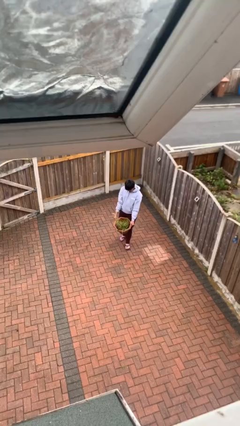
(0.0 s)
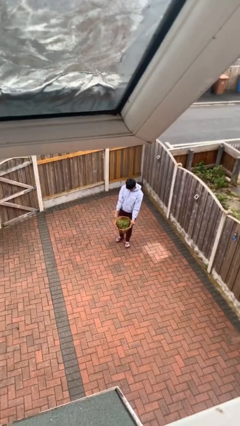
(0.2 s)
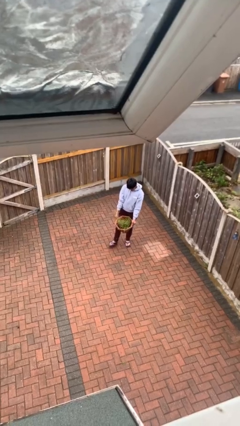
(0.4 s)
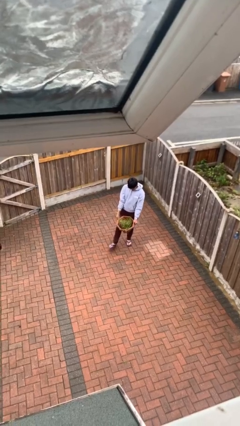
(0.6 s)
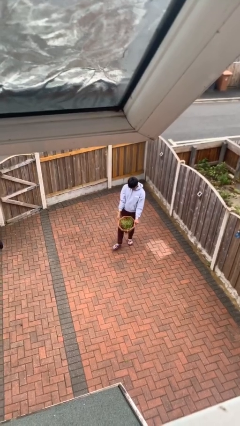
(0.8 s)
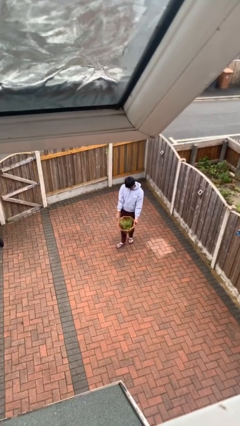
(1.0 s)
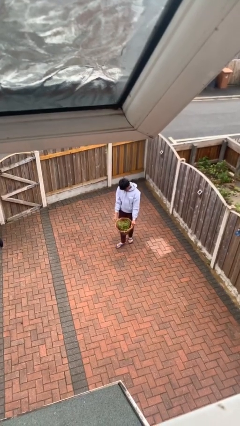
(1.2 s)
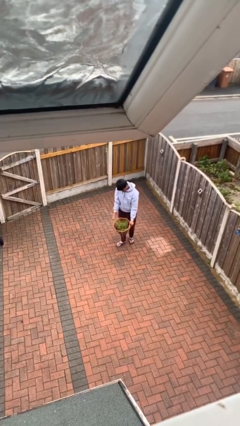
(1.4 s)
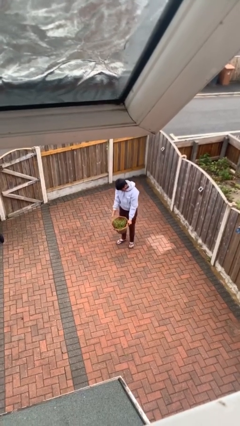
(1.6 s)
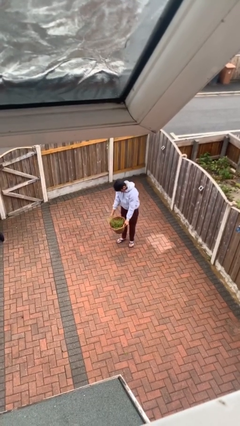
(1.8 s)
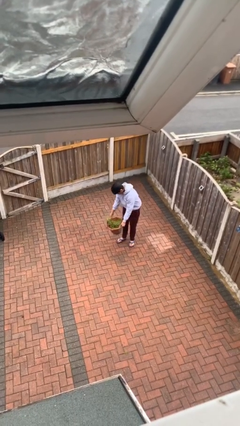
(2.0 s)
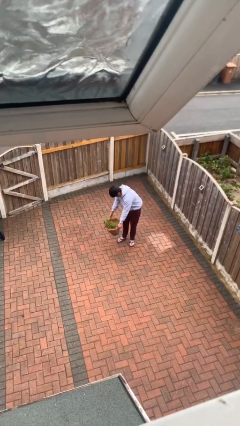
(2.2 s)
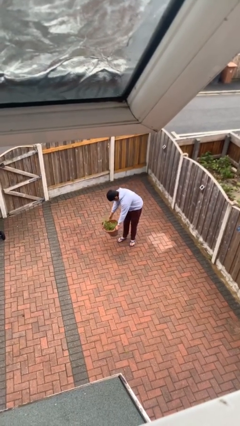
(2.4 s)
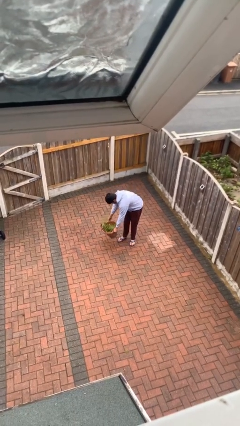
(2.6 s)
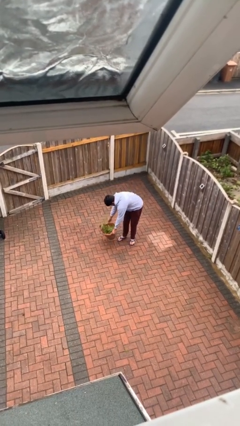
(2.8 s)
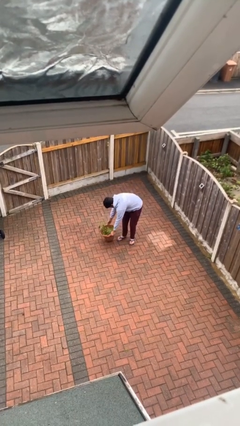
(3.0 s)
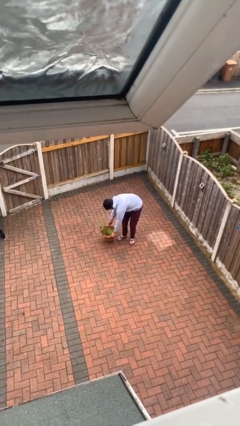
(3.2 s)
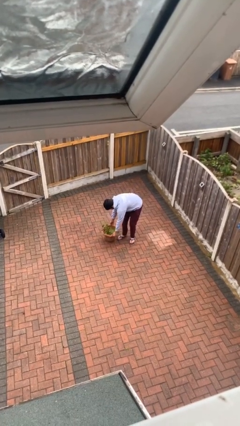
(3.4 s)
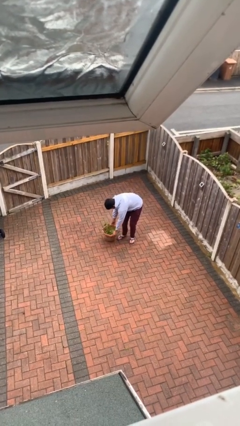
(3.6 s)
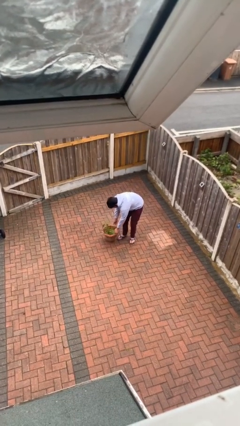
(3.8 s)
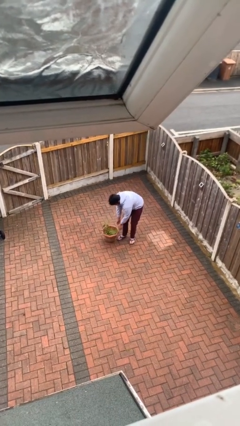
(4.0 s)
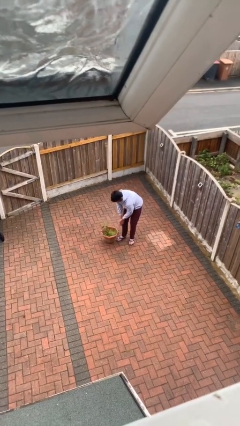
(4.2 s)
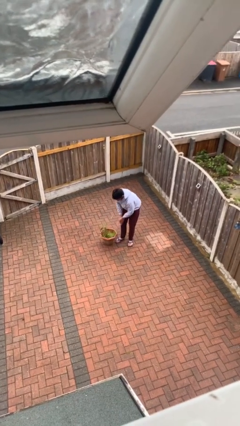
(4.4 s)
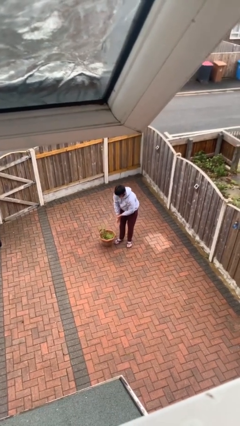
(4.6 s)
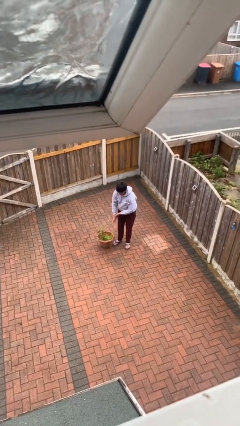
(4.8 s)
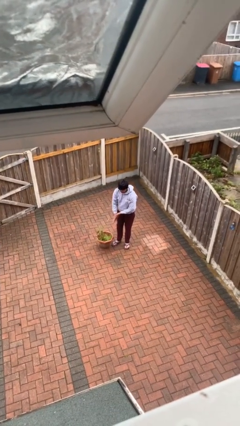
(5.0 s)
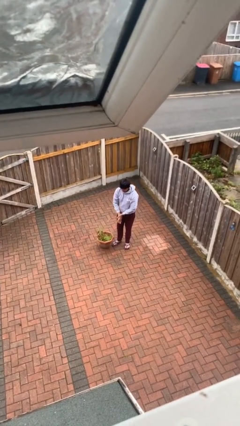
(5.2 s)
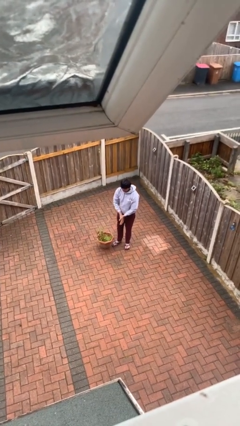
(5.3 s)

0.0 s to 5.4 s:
person puts down object on floor

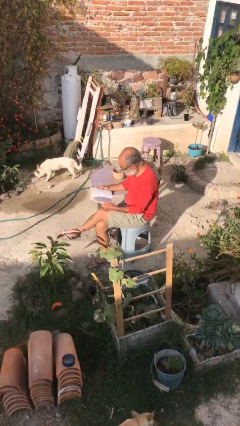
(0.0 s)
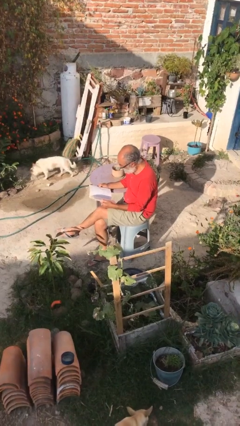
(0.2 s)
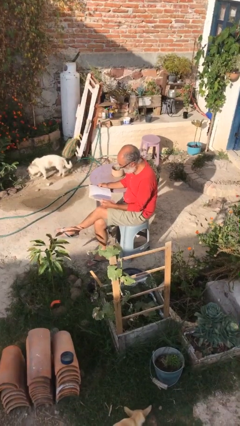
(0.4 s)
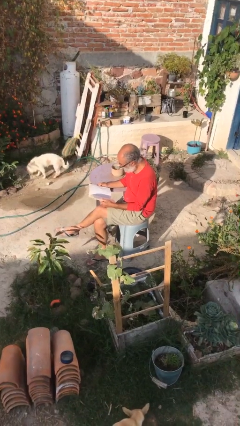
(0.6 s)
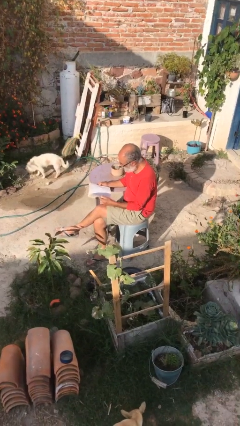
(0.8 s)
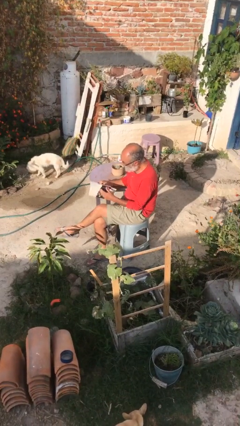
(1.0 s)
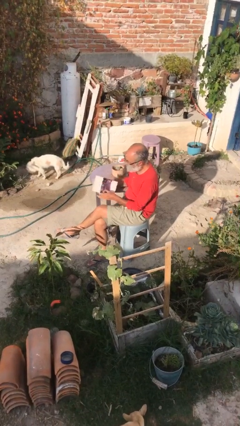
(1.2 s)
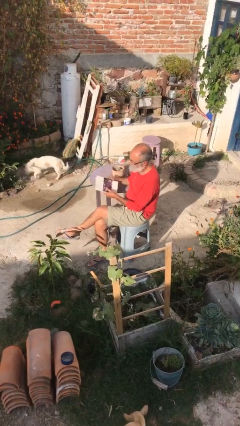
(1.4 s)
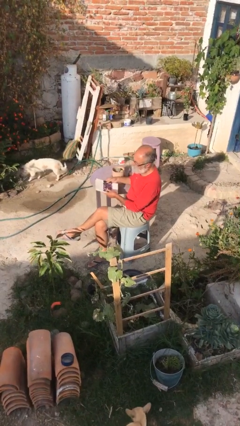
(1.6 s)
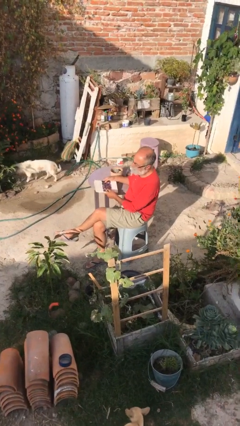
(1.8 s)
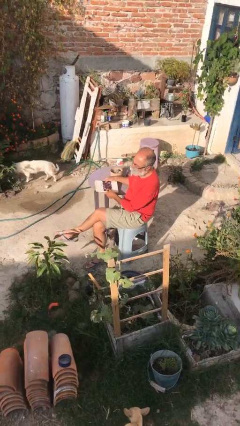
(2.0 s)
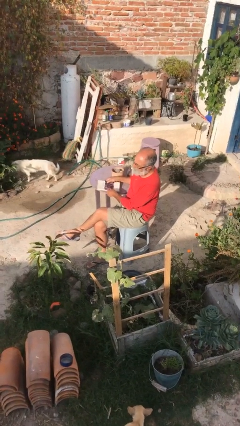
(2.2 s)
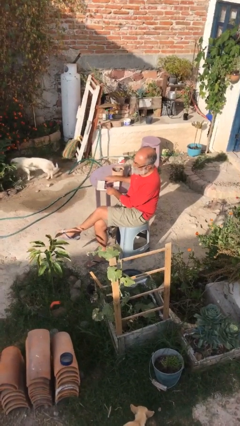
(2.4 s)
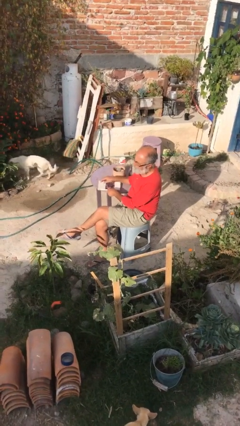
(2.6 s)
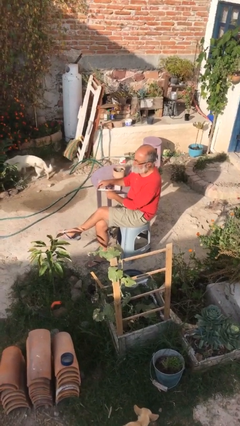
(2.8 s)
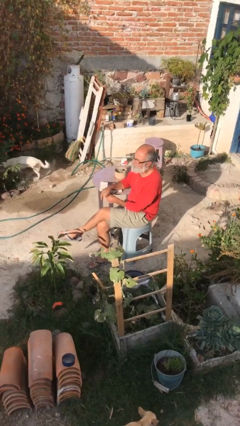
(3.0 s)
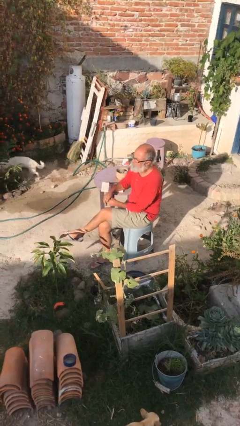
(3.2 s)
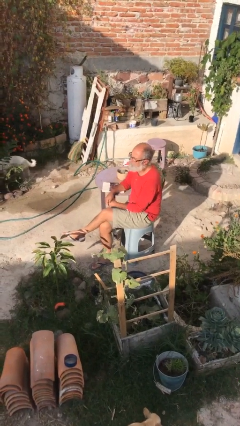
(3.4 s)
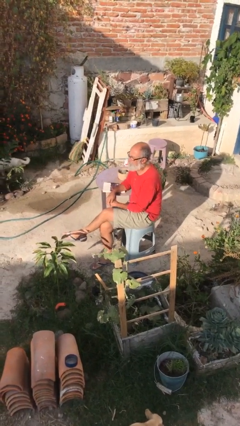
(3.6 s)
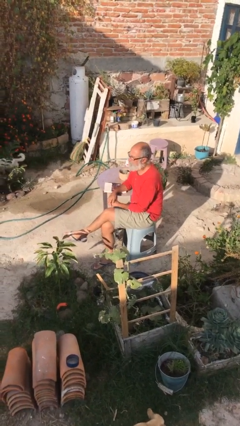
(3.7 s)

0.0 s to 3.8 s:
person puts down object on table

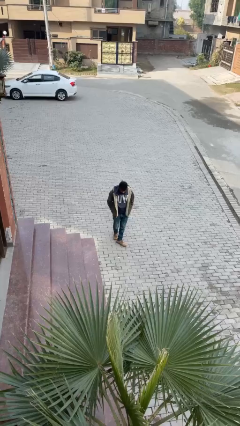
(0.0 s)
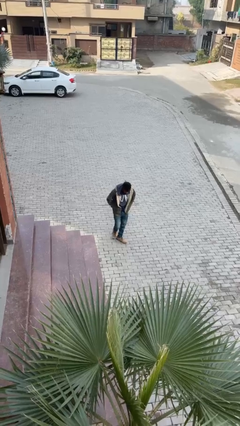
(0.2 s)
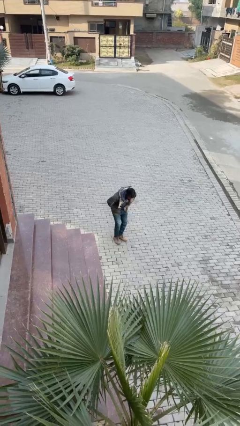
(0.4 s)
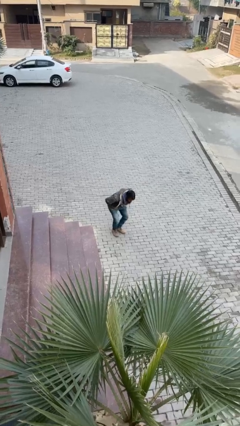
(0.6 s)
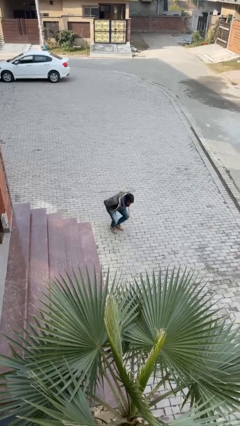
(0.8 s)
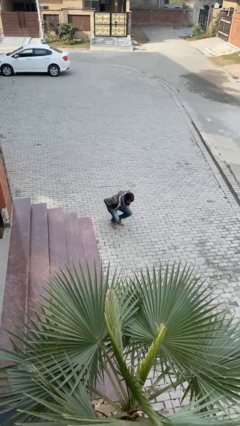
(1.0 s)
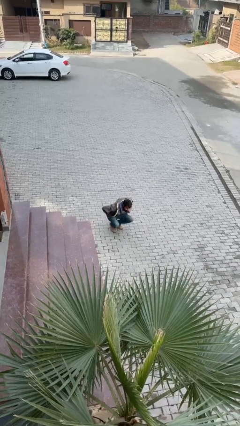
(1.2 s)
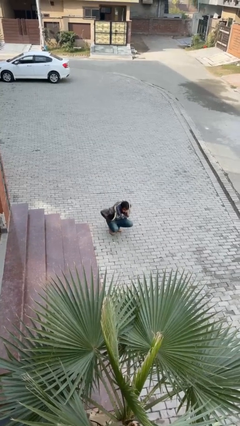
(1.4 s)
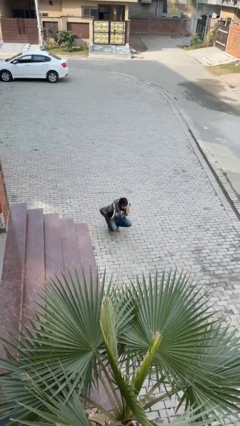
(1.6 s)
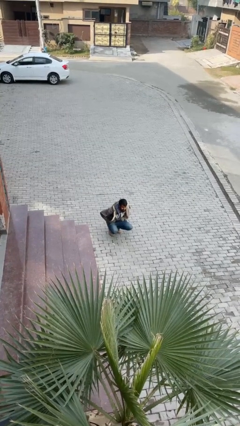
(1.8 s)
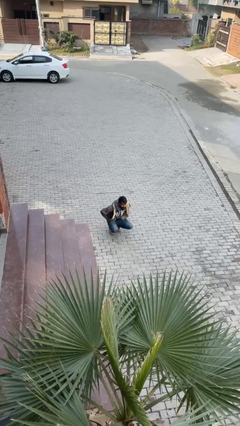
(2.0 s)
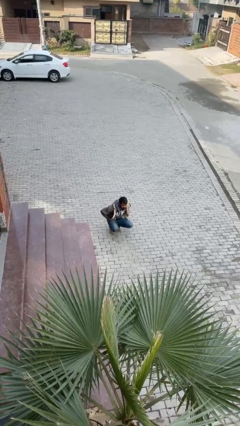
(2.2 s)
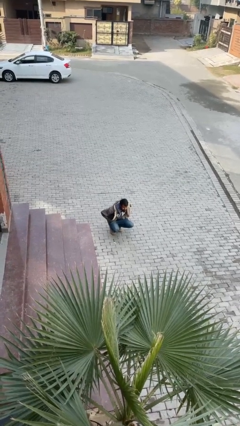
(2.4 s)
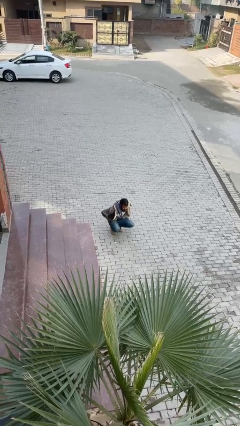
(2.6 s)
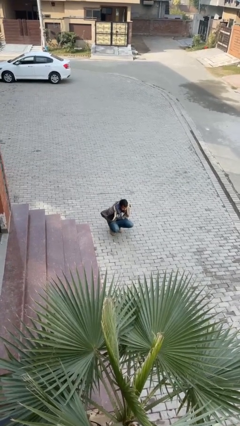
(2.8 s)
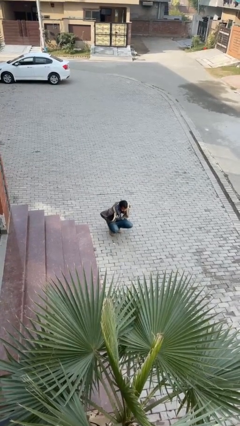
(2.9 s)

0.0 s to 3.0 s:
person sits down

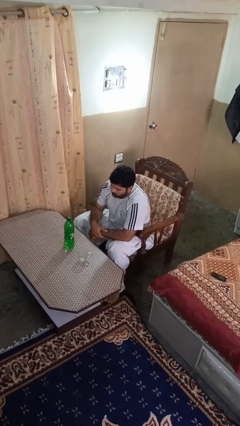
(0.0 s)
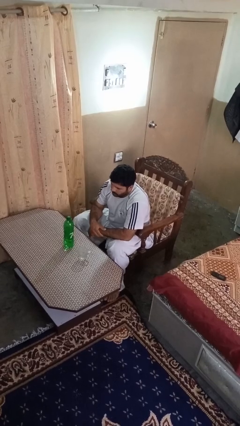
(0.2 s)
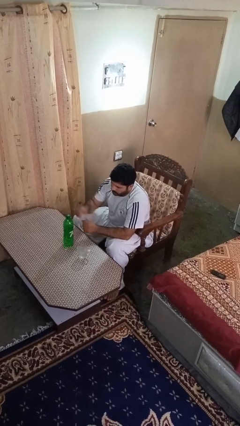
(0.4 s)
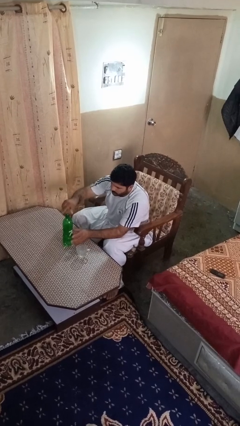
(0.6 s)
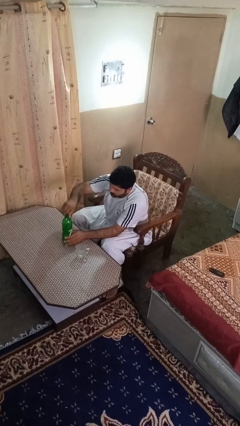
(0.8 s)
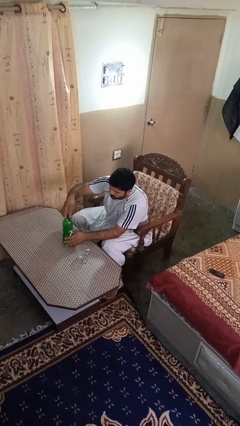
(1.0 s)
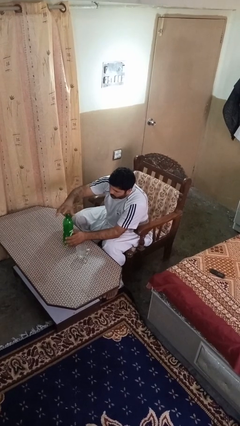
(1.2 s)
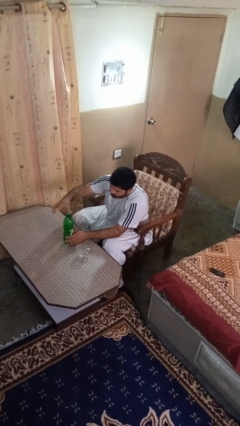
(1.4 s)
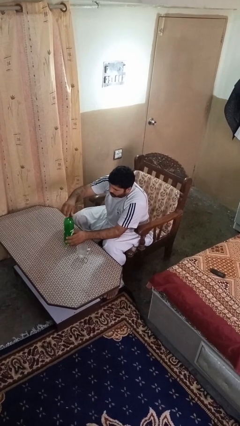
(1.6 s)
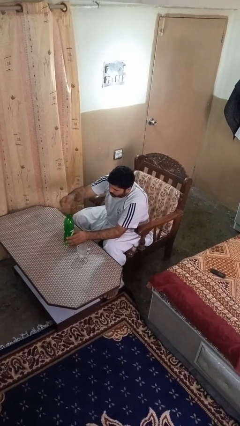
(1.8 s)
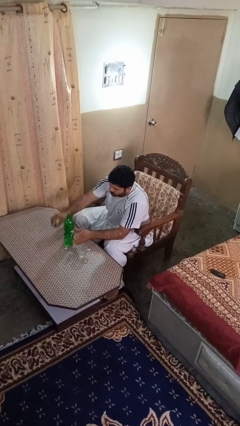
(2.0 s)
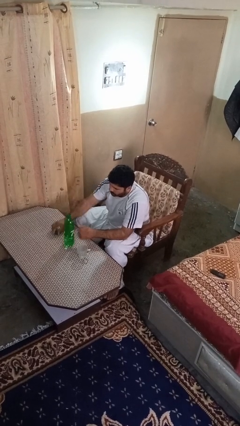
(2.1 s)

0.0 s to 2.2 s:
person unscrews lid from bottle

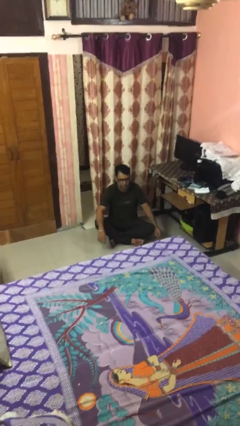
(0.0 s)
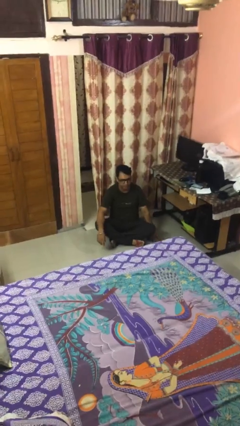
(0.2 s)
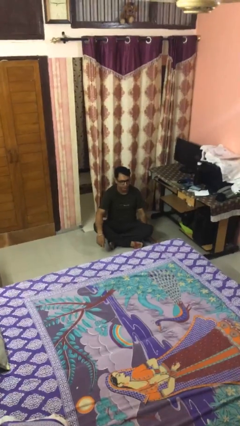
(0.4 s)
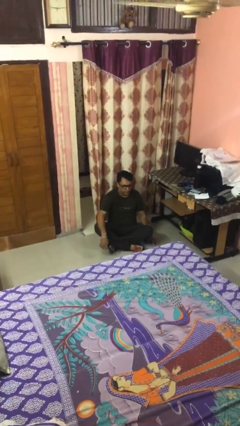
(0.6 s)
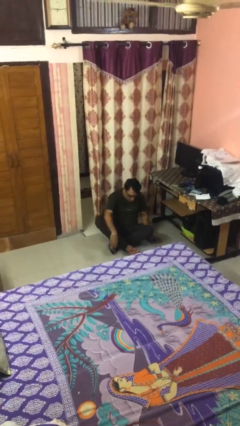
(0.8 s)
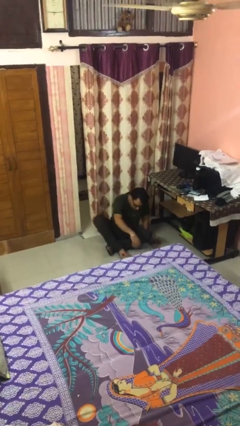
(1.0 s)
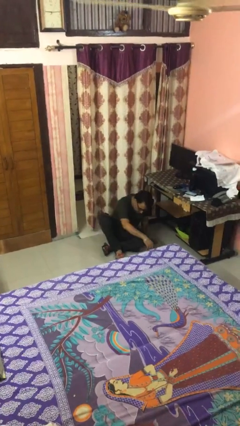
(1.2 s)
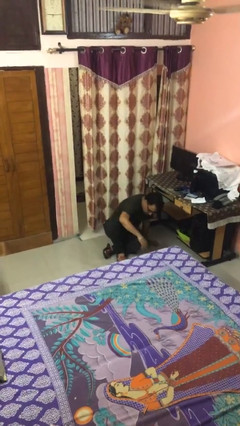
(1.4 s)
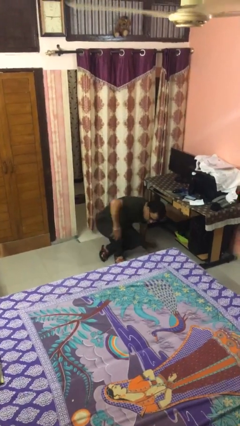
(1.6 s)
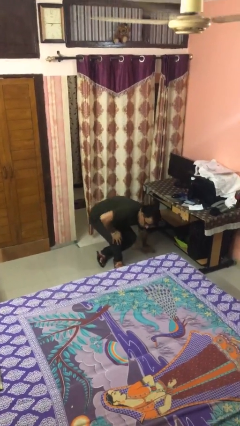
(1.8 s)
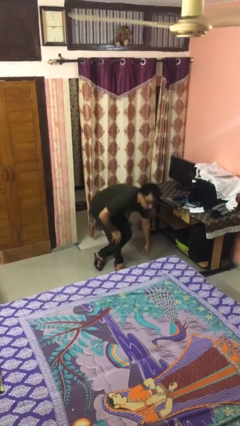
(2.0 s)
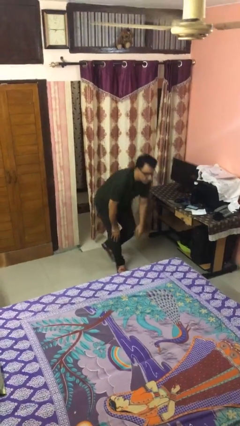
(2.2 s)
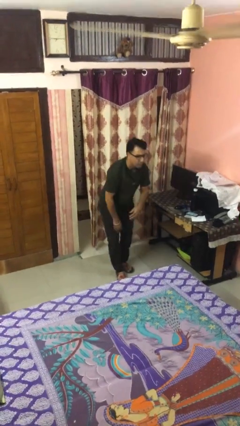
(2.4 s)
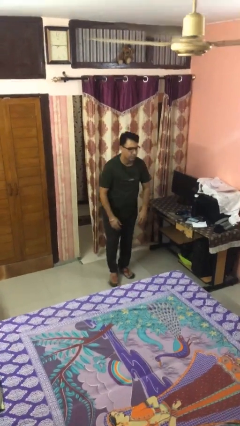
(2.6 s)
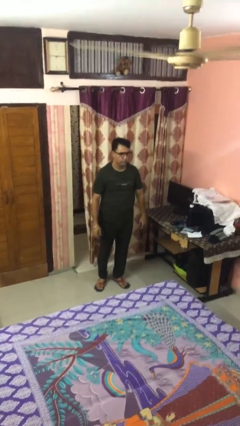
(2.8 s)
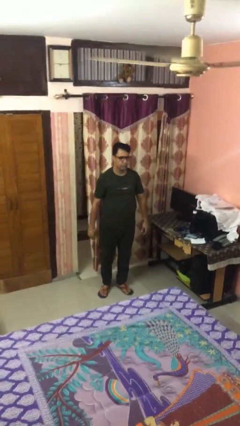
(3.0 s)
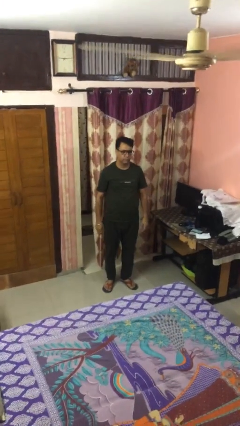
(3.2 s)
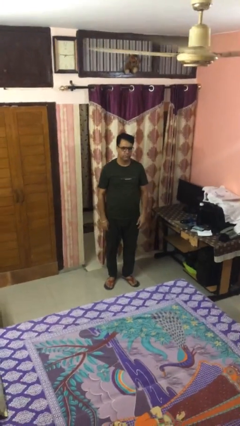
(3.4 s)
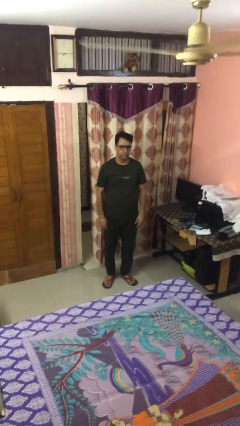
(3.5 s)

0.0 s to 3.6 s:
person stands up from floor
